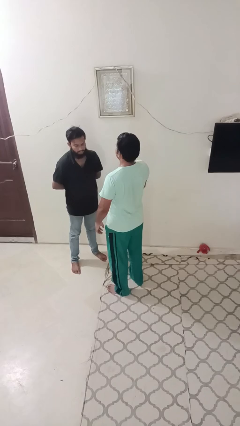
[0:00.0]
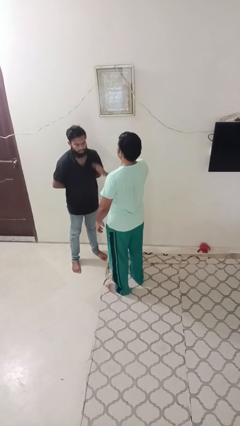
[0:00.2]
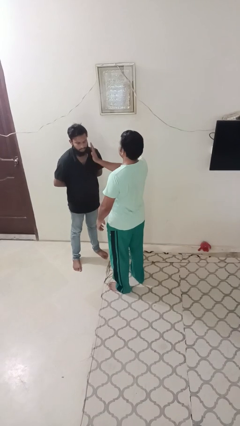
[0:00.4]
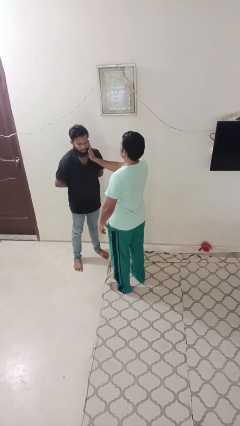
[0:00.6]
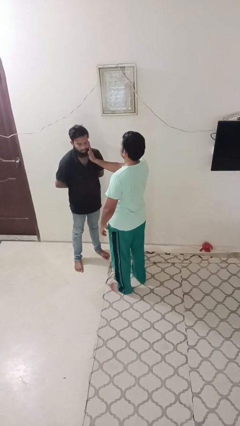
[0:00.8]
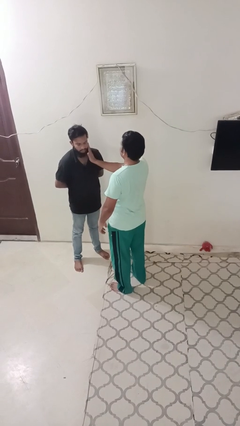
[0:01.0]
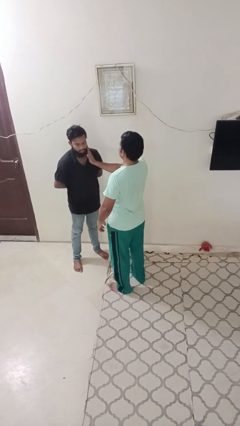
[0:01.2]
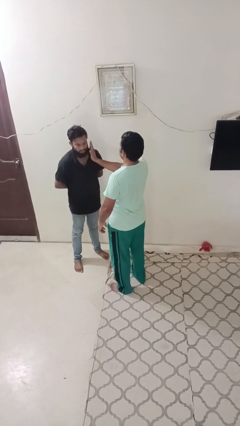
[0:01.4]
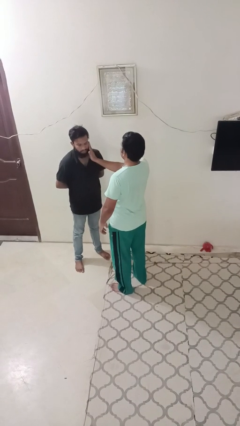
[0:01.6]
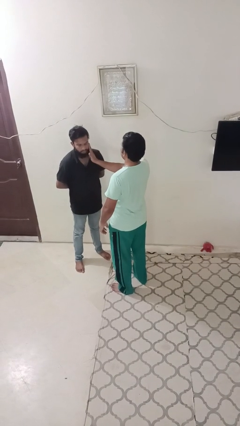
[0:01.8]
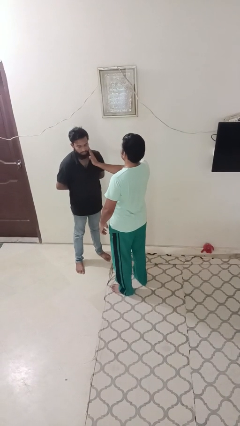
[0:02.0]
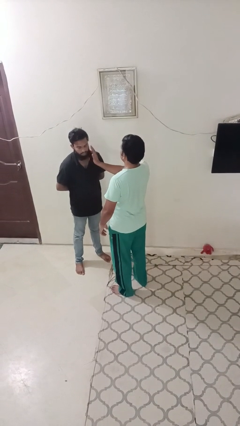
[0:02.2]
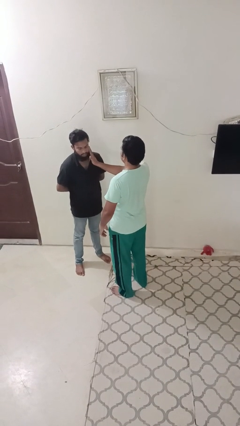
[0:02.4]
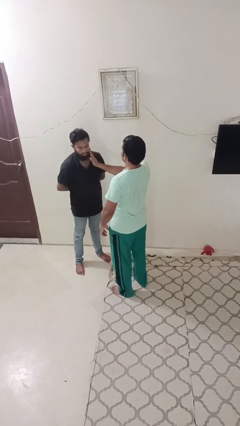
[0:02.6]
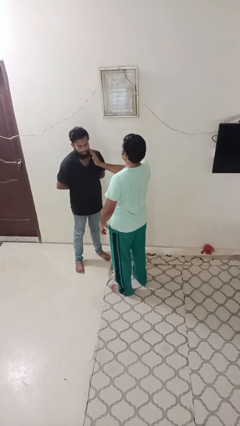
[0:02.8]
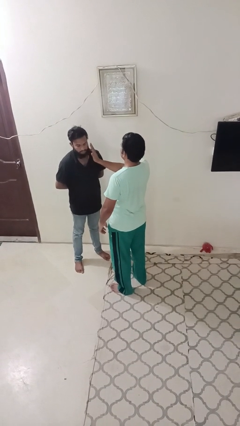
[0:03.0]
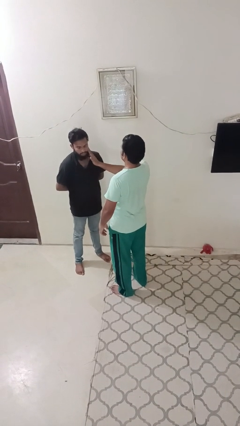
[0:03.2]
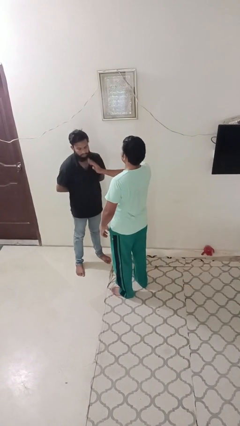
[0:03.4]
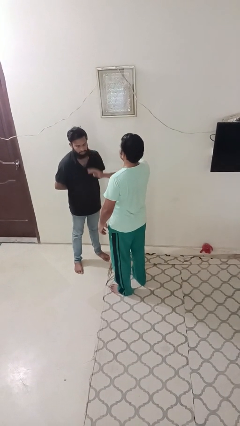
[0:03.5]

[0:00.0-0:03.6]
person touches face of person

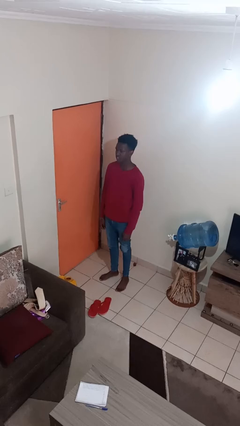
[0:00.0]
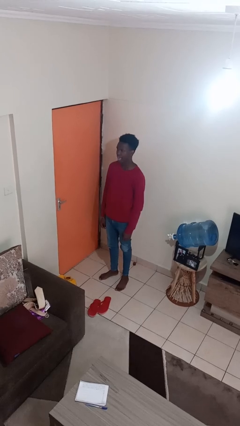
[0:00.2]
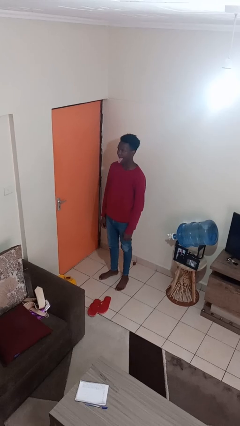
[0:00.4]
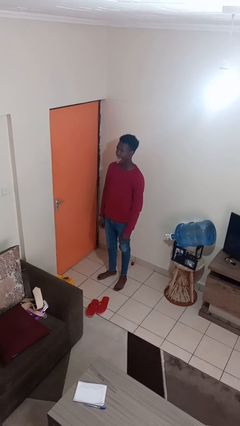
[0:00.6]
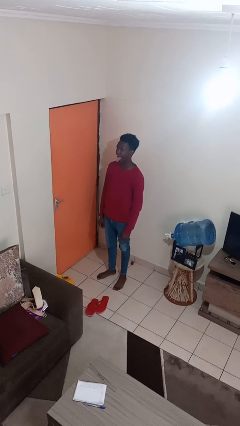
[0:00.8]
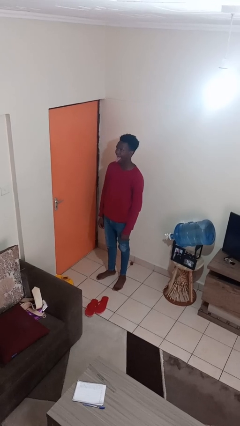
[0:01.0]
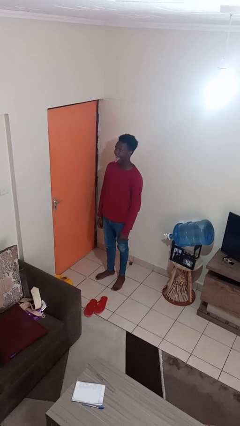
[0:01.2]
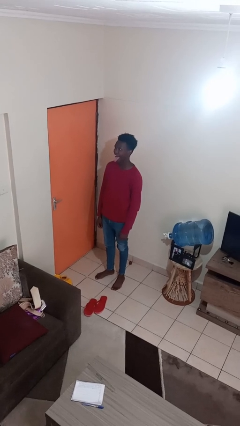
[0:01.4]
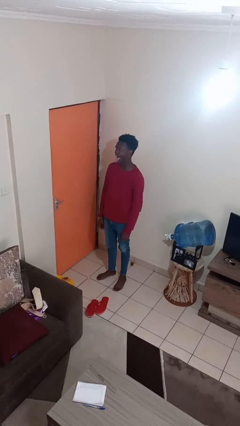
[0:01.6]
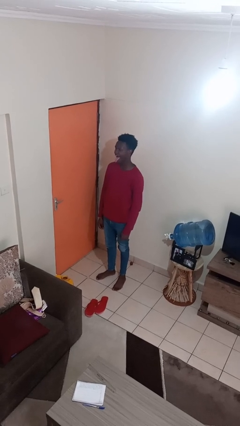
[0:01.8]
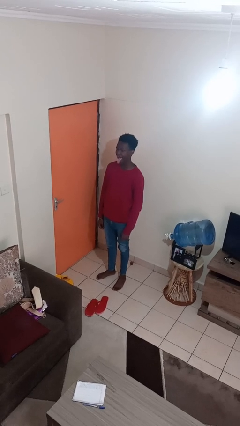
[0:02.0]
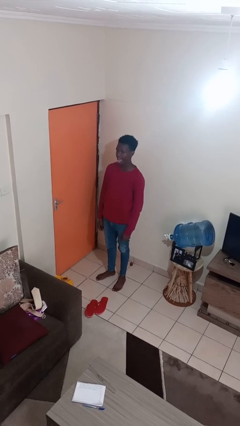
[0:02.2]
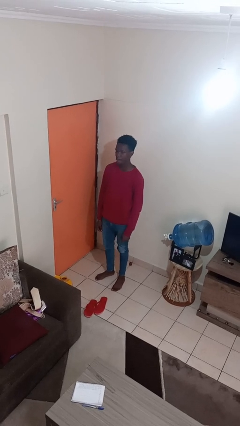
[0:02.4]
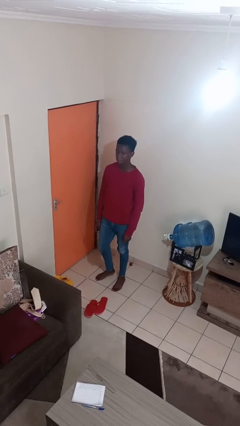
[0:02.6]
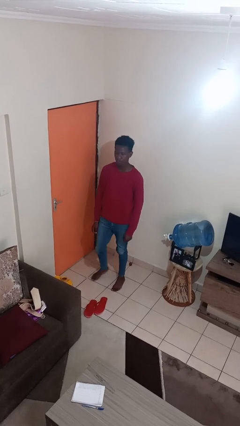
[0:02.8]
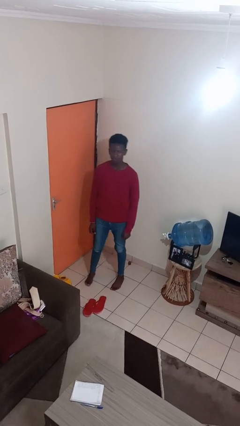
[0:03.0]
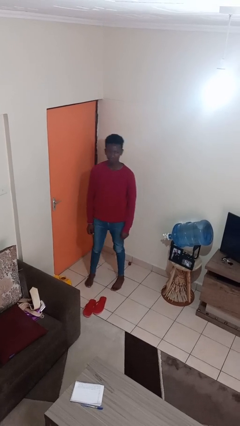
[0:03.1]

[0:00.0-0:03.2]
person sticks out tongue

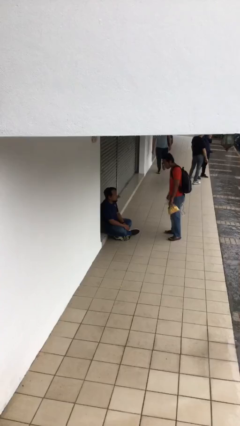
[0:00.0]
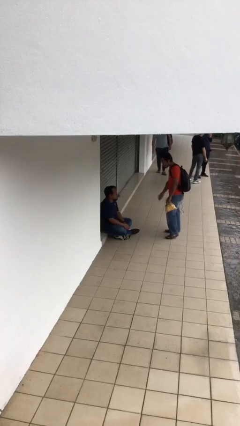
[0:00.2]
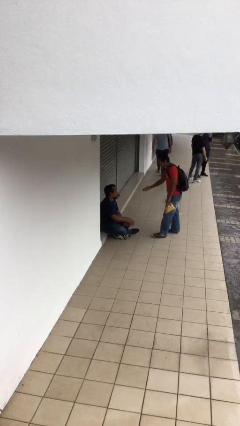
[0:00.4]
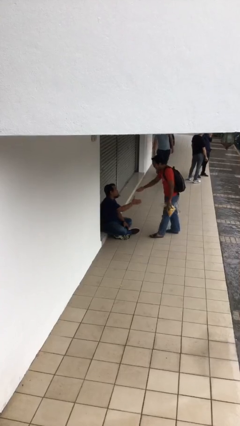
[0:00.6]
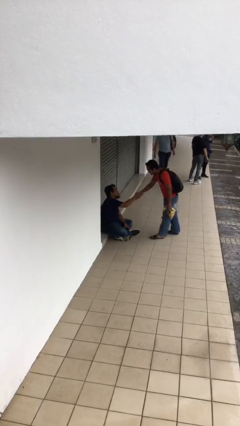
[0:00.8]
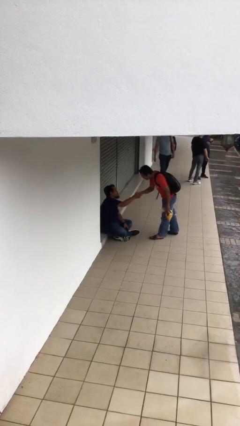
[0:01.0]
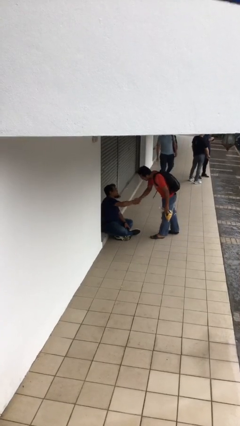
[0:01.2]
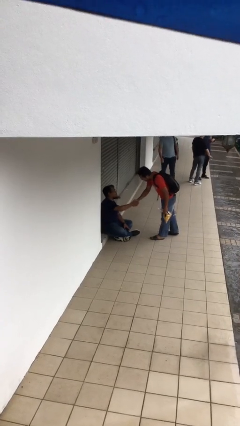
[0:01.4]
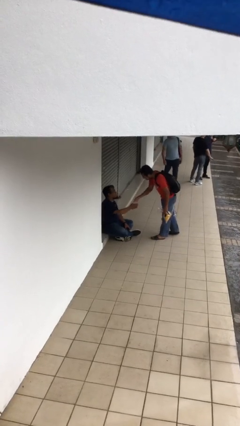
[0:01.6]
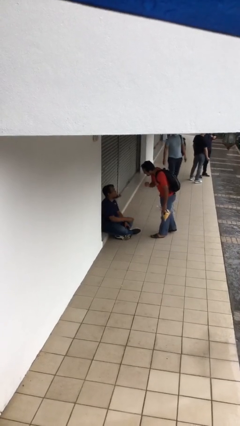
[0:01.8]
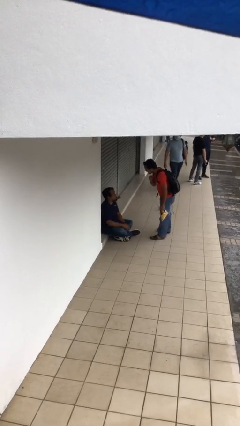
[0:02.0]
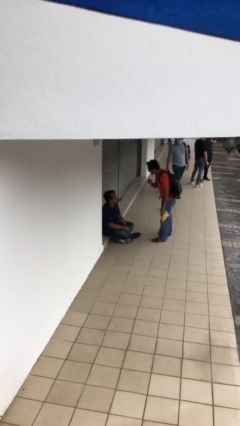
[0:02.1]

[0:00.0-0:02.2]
person shakes hand

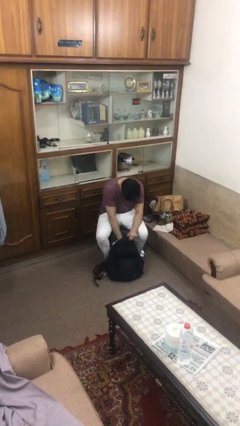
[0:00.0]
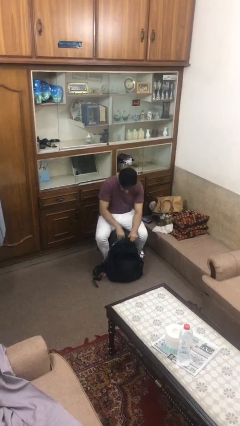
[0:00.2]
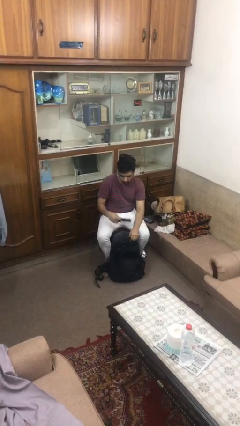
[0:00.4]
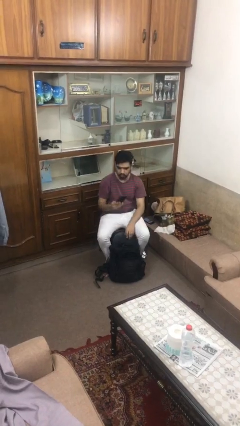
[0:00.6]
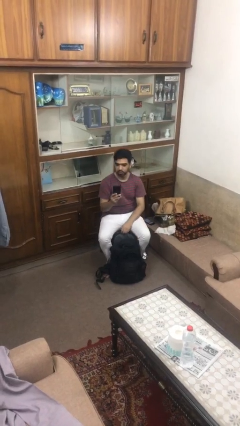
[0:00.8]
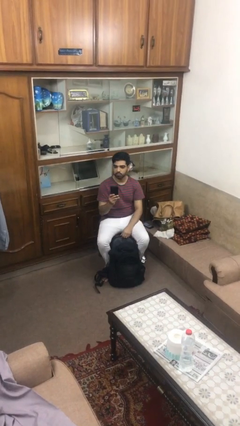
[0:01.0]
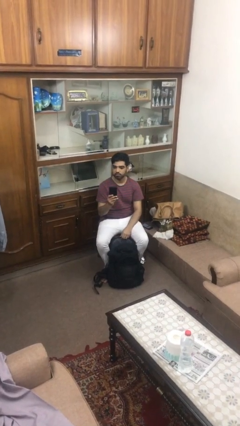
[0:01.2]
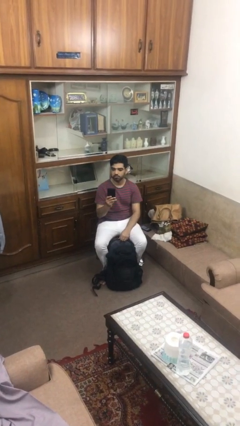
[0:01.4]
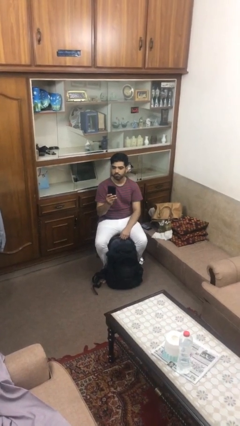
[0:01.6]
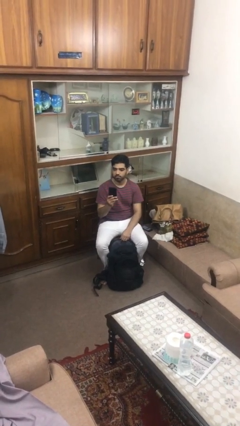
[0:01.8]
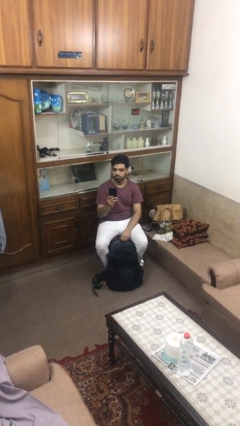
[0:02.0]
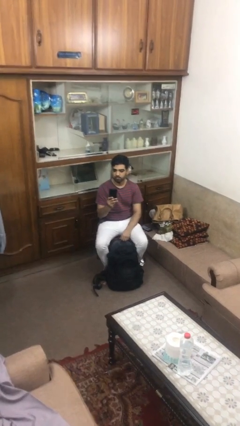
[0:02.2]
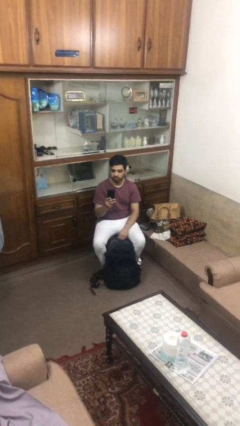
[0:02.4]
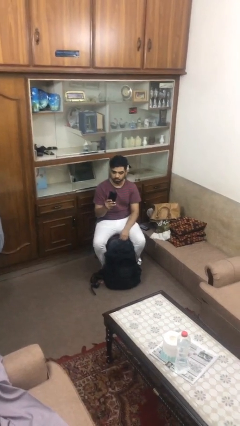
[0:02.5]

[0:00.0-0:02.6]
person takes object from backpack

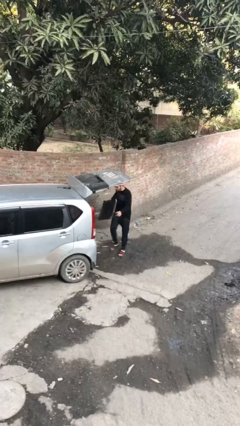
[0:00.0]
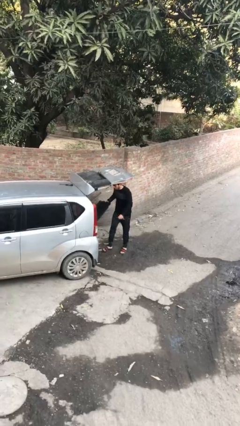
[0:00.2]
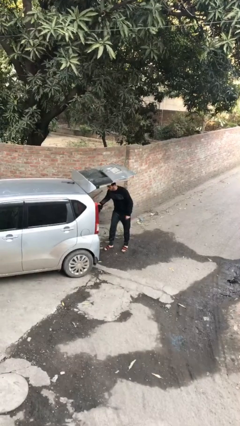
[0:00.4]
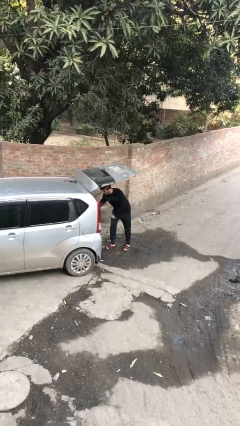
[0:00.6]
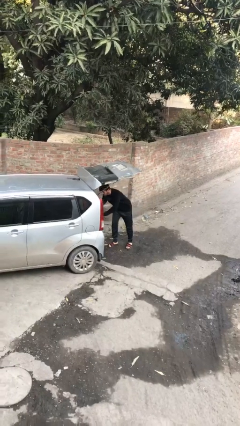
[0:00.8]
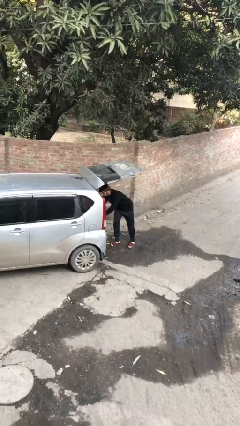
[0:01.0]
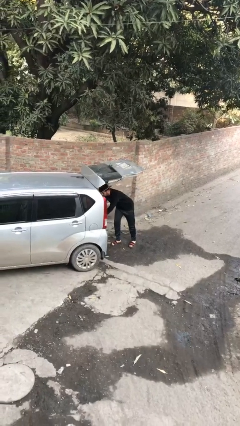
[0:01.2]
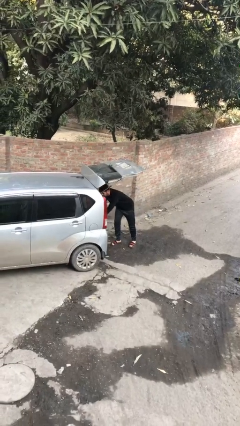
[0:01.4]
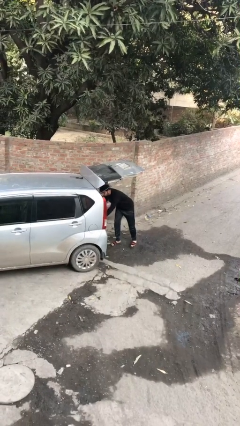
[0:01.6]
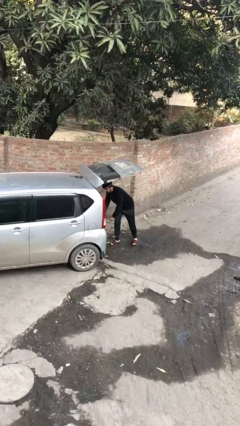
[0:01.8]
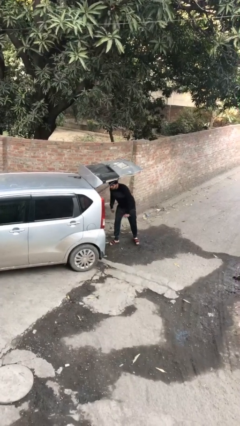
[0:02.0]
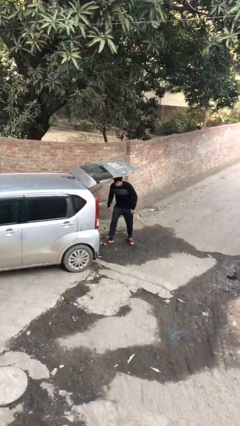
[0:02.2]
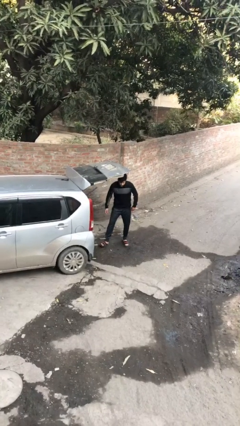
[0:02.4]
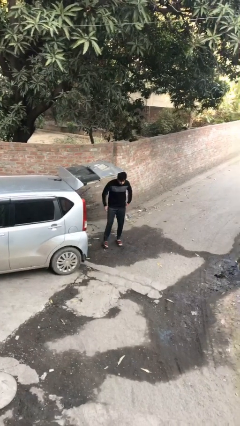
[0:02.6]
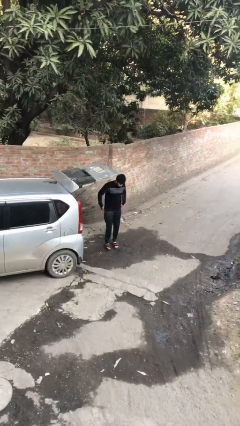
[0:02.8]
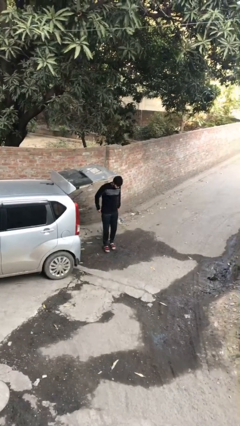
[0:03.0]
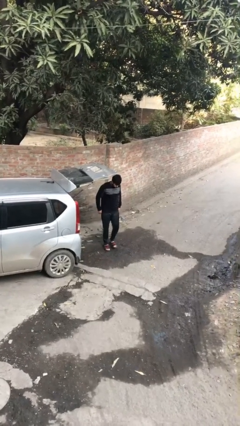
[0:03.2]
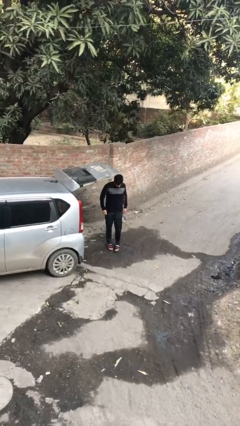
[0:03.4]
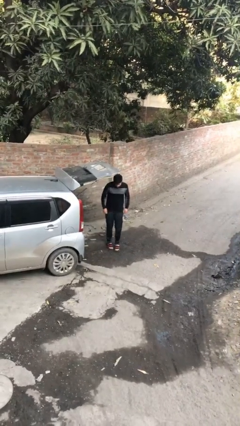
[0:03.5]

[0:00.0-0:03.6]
person loads car

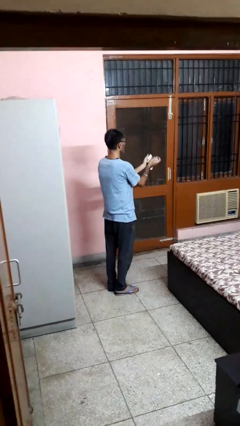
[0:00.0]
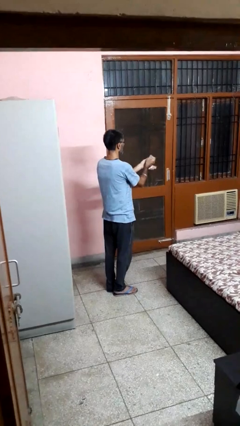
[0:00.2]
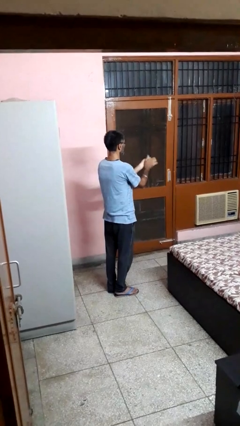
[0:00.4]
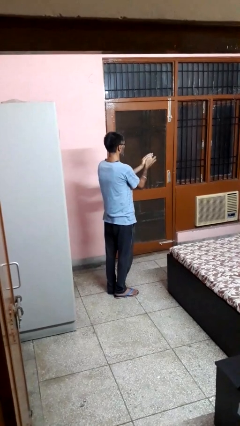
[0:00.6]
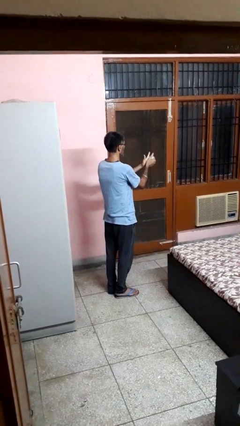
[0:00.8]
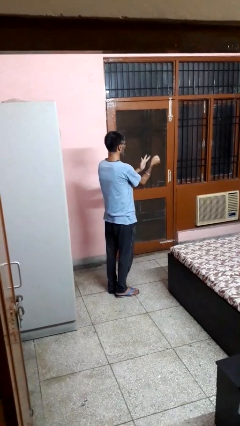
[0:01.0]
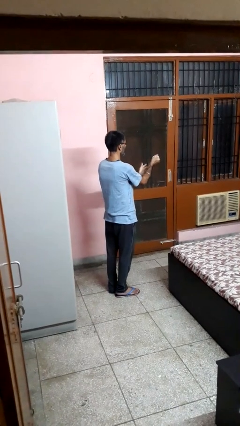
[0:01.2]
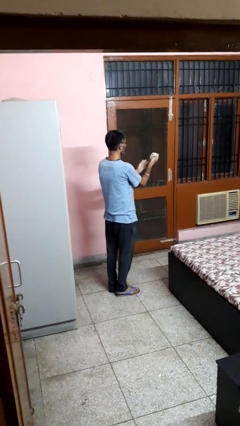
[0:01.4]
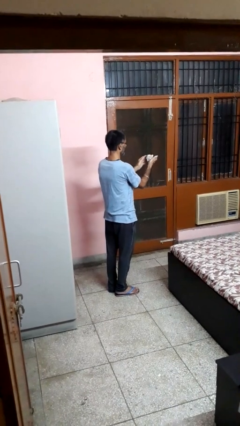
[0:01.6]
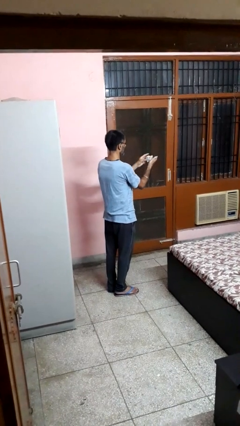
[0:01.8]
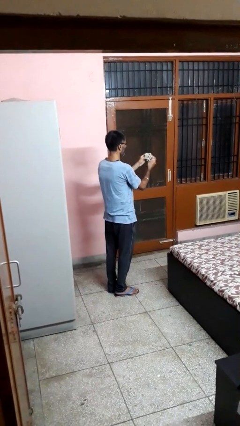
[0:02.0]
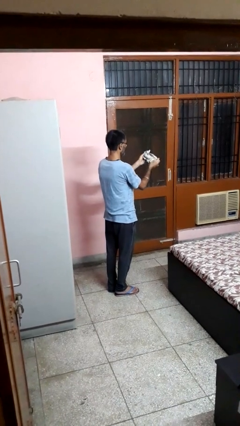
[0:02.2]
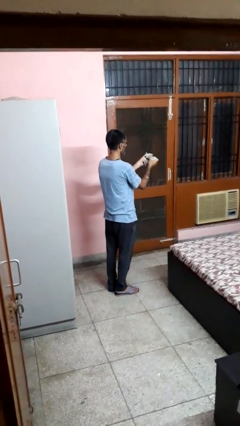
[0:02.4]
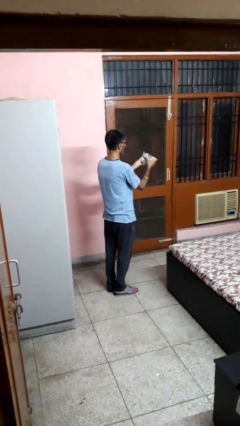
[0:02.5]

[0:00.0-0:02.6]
person crumples paper
